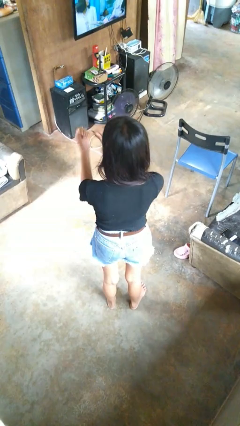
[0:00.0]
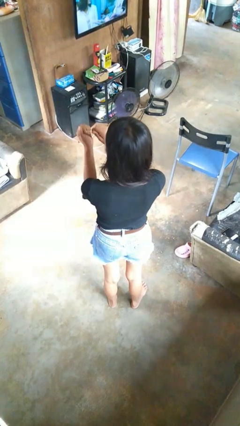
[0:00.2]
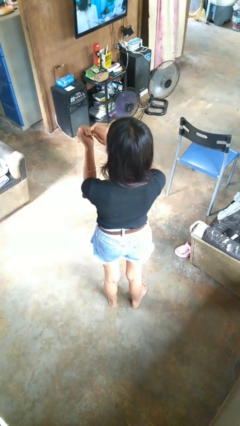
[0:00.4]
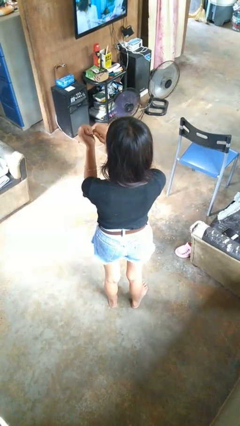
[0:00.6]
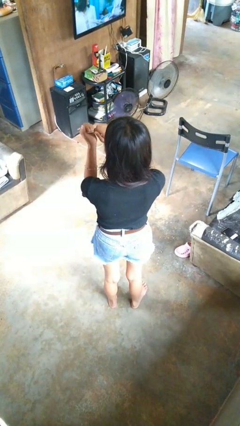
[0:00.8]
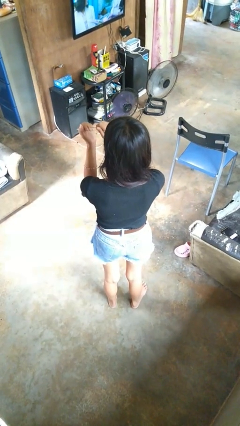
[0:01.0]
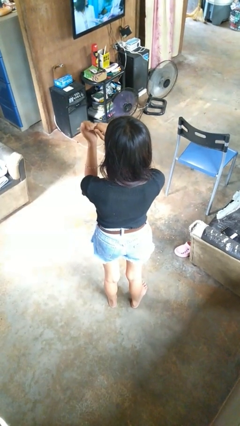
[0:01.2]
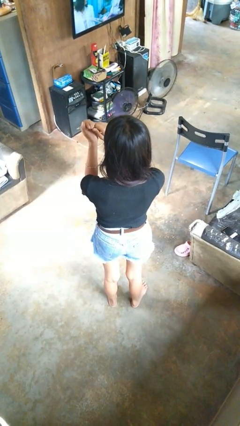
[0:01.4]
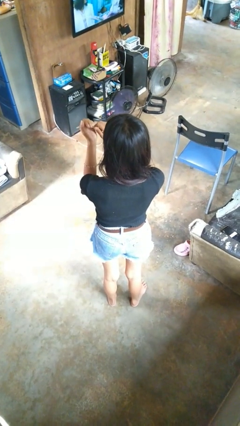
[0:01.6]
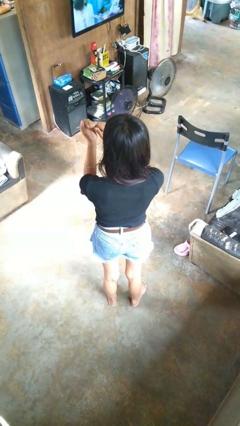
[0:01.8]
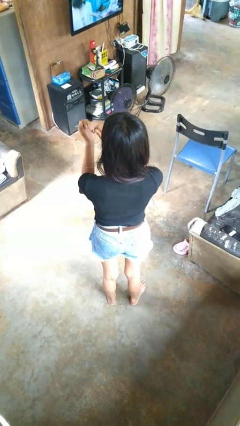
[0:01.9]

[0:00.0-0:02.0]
person files fingernails

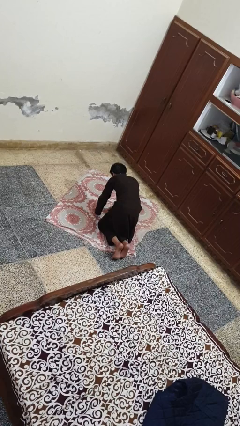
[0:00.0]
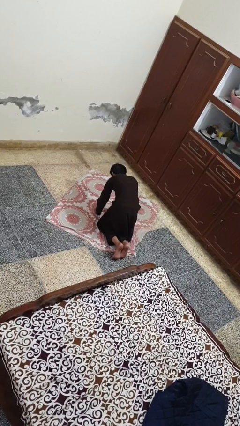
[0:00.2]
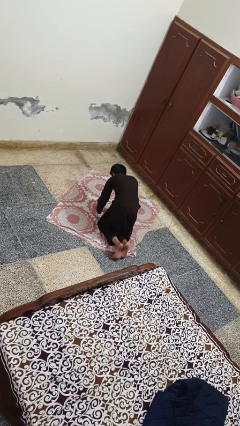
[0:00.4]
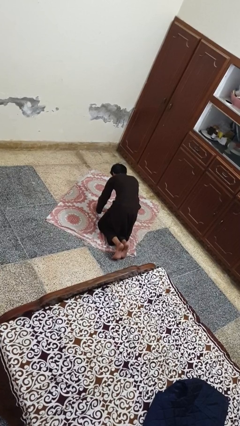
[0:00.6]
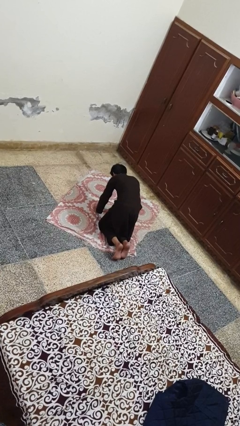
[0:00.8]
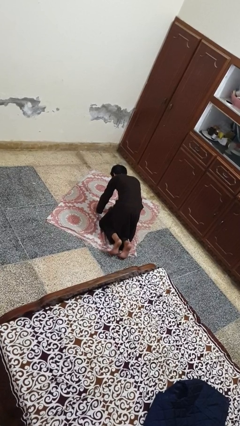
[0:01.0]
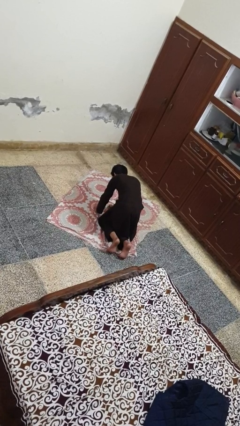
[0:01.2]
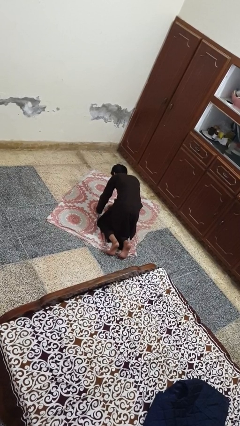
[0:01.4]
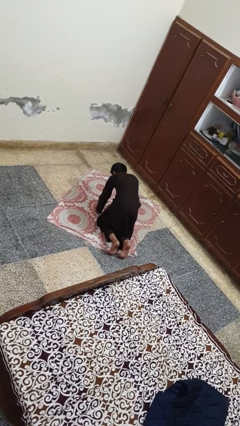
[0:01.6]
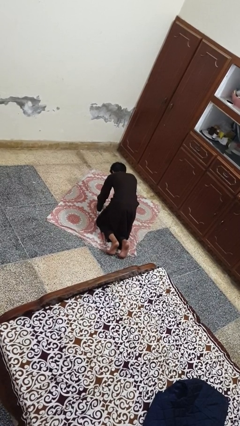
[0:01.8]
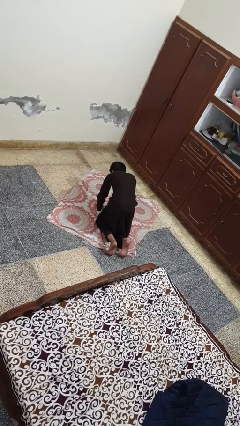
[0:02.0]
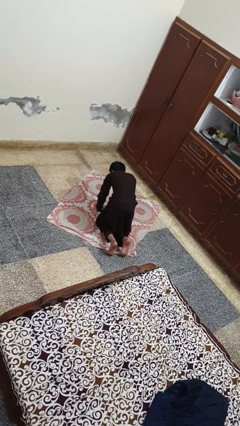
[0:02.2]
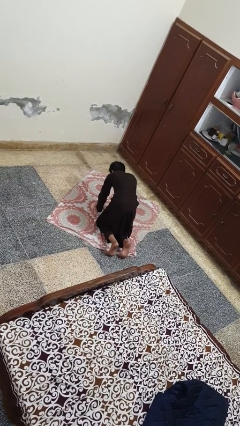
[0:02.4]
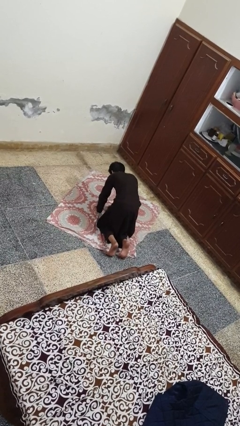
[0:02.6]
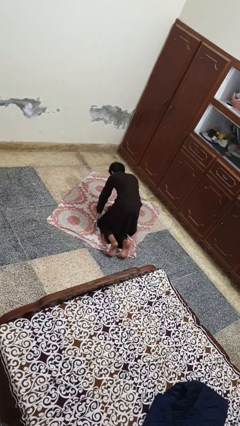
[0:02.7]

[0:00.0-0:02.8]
person crawls

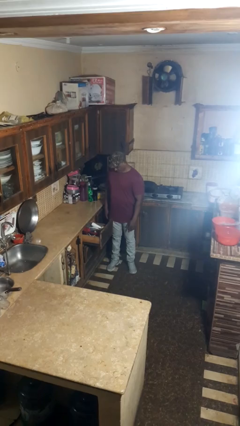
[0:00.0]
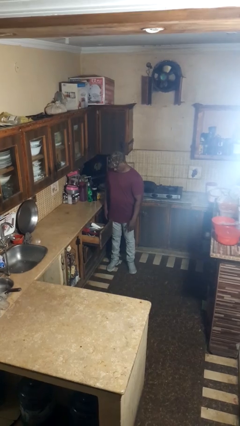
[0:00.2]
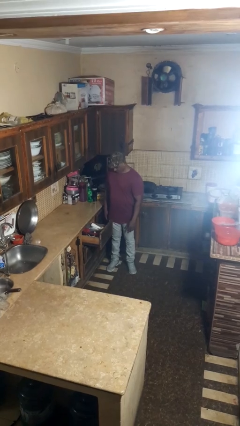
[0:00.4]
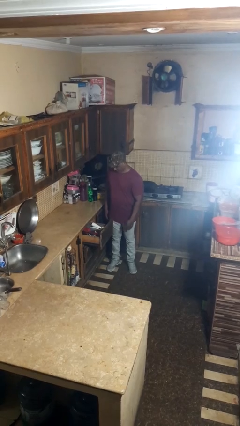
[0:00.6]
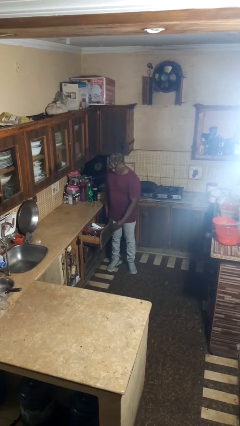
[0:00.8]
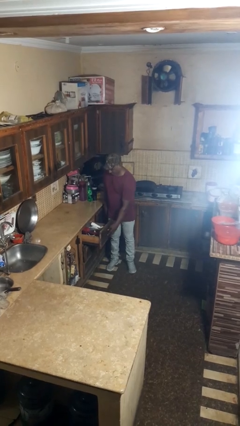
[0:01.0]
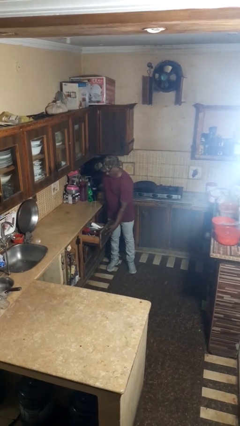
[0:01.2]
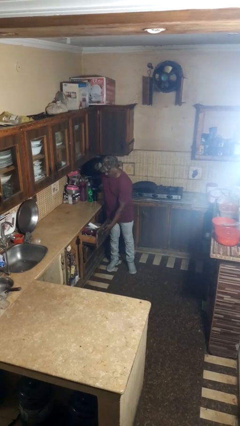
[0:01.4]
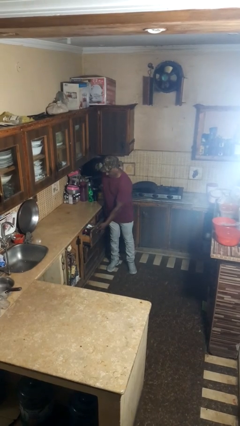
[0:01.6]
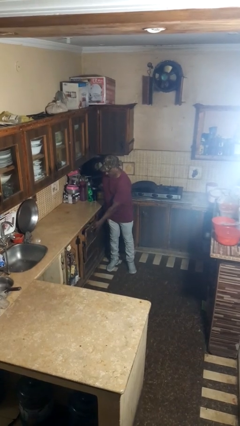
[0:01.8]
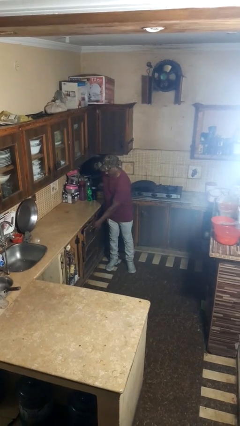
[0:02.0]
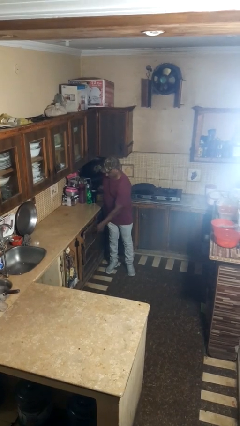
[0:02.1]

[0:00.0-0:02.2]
person closes kitchen drawer

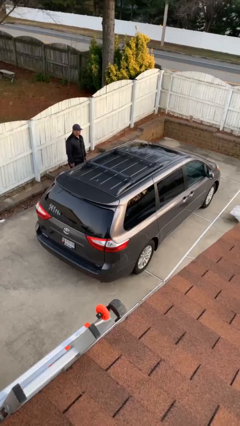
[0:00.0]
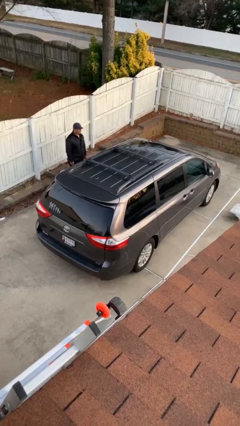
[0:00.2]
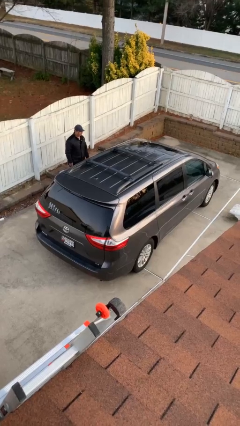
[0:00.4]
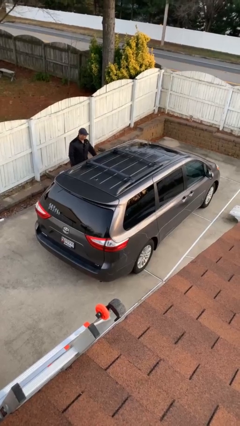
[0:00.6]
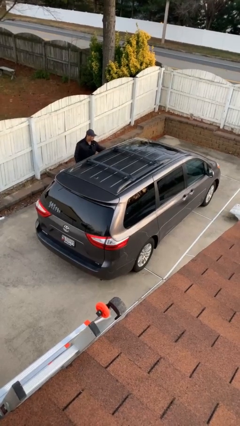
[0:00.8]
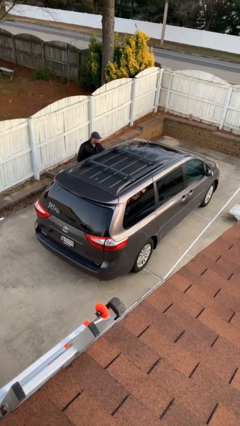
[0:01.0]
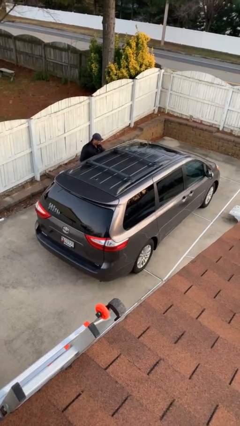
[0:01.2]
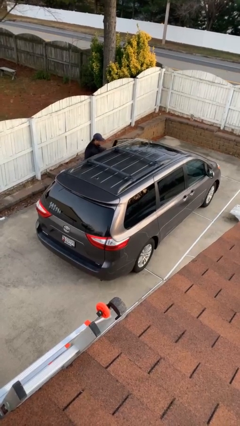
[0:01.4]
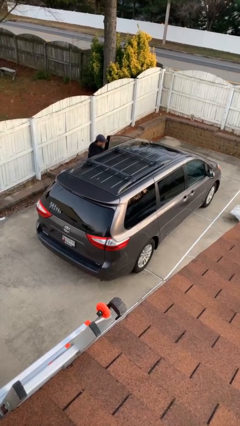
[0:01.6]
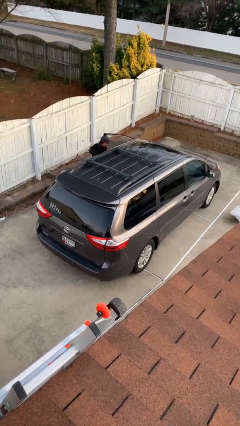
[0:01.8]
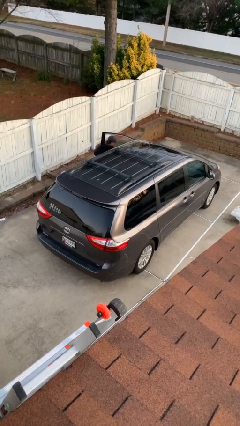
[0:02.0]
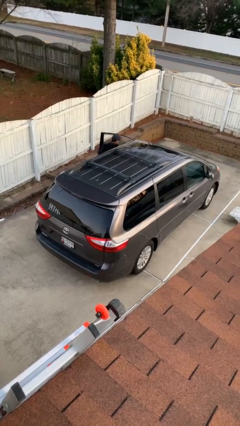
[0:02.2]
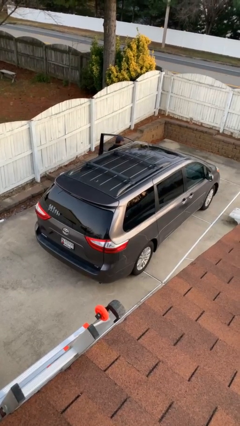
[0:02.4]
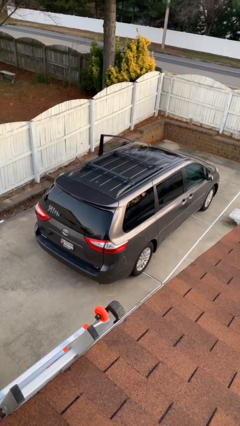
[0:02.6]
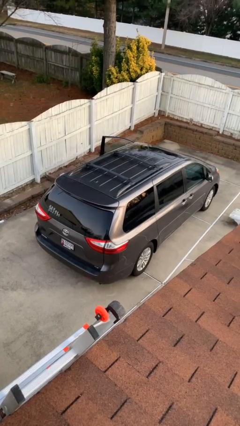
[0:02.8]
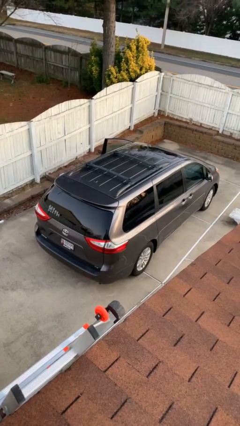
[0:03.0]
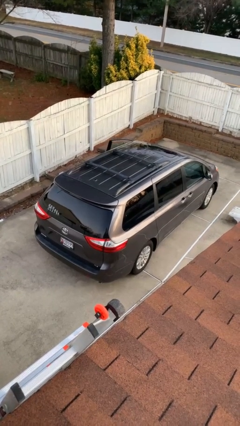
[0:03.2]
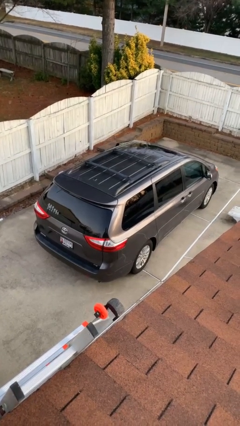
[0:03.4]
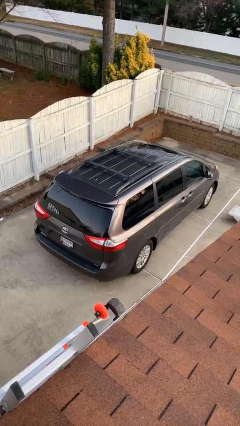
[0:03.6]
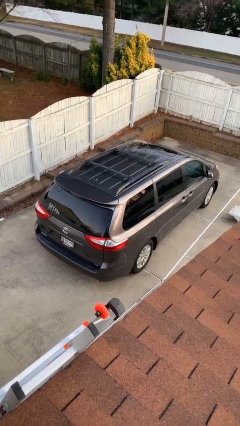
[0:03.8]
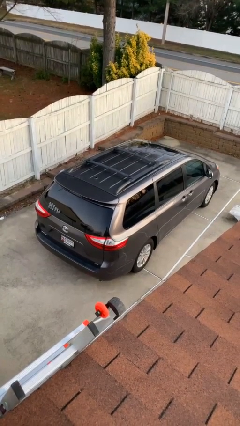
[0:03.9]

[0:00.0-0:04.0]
car picks up person

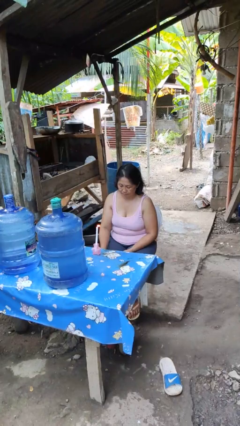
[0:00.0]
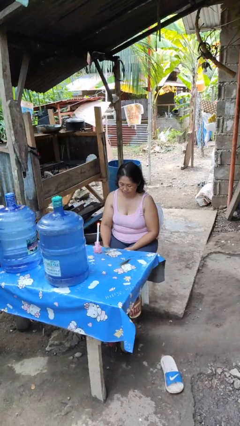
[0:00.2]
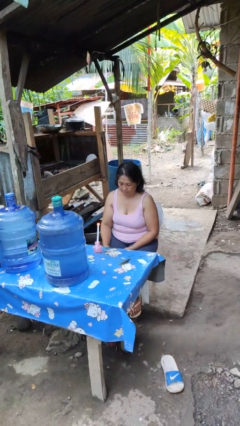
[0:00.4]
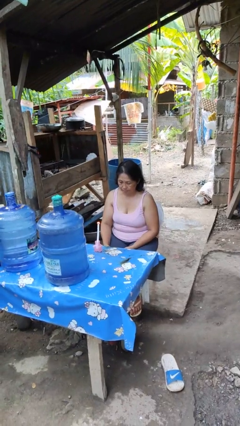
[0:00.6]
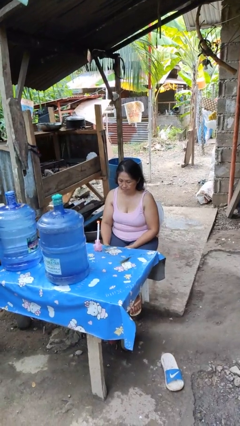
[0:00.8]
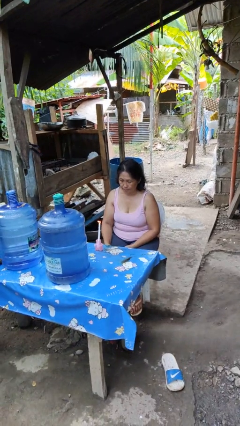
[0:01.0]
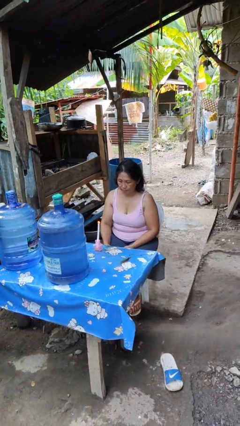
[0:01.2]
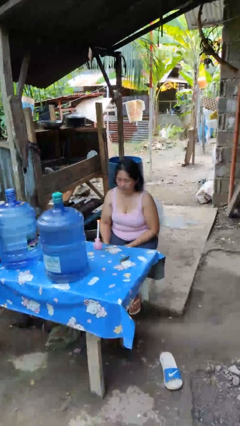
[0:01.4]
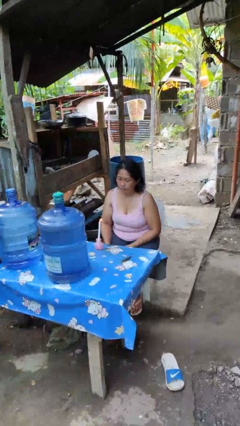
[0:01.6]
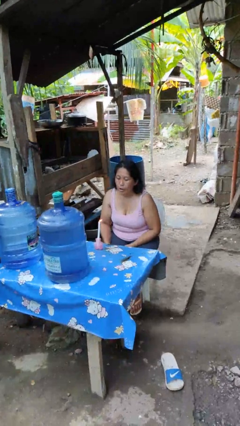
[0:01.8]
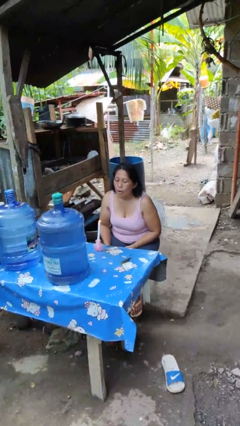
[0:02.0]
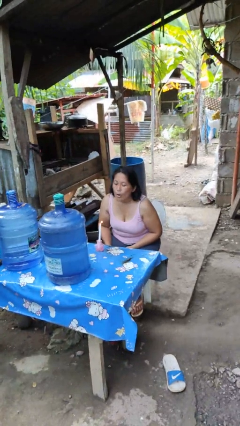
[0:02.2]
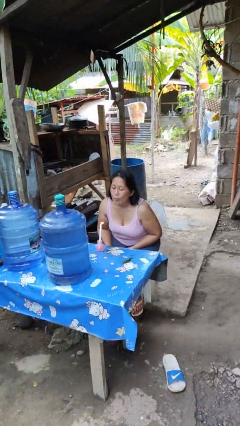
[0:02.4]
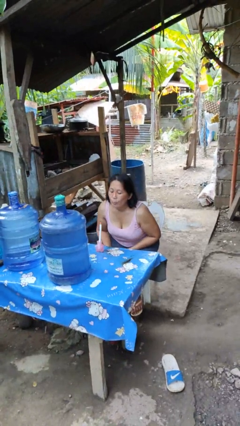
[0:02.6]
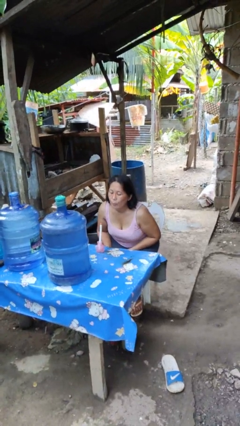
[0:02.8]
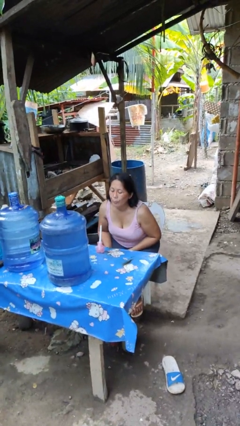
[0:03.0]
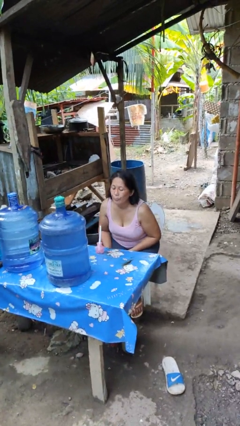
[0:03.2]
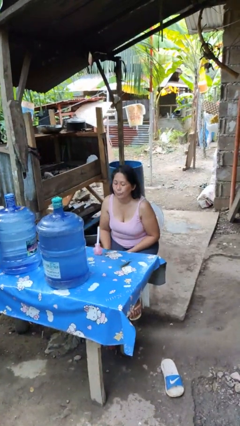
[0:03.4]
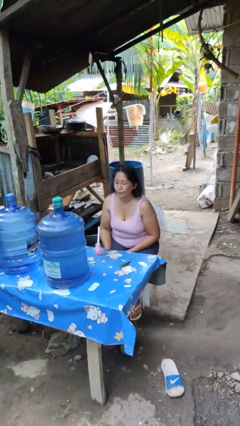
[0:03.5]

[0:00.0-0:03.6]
person extinguishes candle

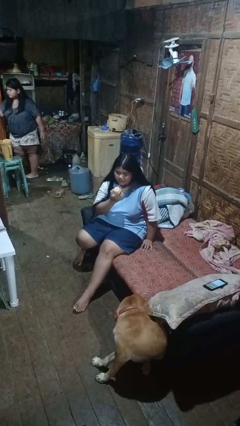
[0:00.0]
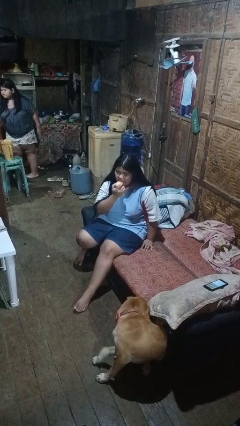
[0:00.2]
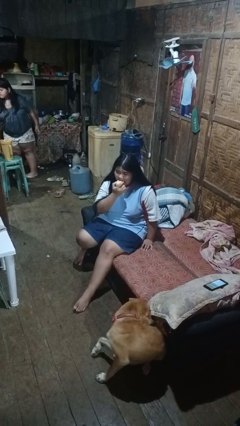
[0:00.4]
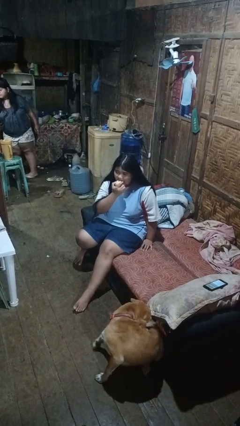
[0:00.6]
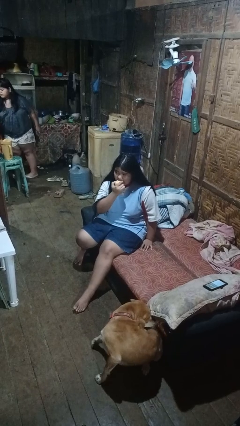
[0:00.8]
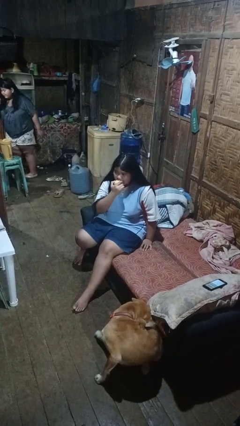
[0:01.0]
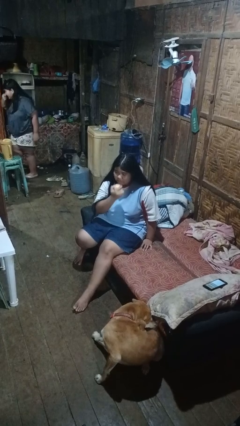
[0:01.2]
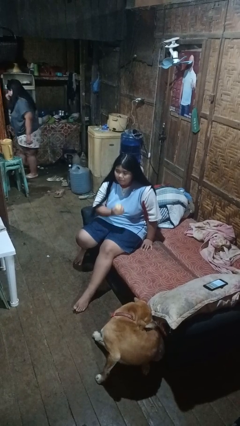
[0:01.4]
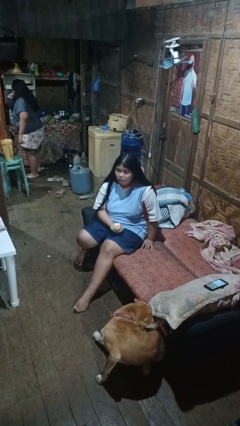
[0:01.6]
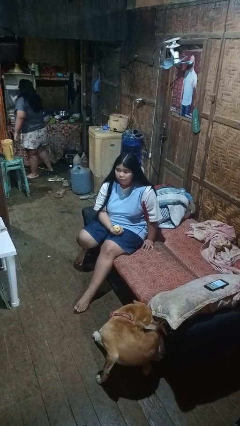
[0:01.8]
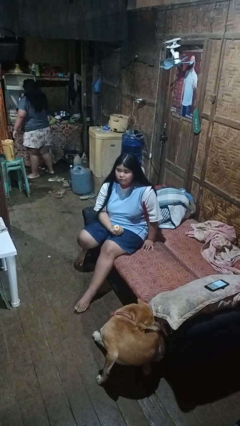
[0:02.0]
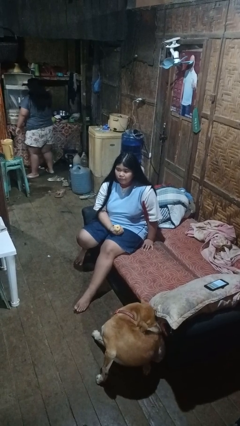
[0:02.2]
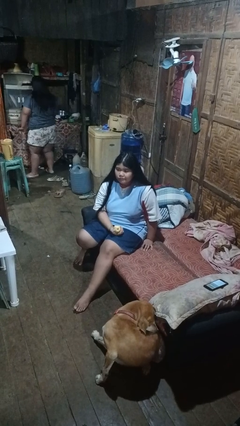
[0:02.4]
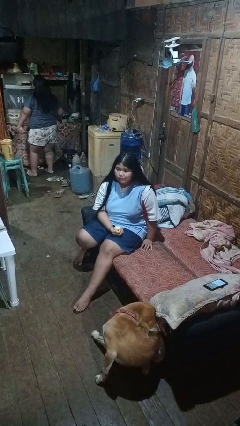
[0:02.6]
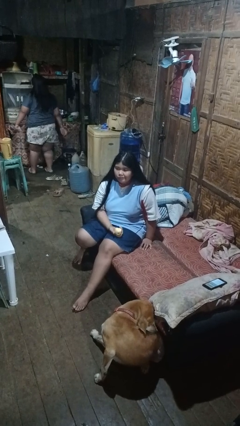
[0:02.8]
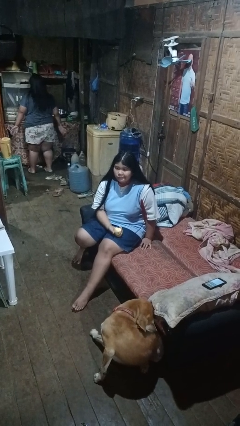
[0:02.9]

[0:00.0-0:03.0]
person eats apple
